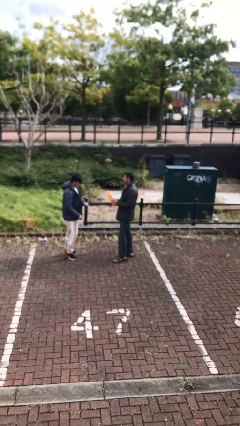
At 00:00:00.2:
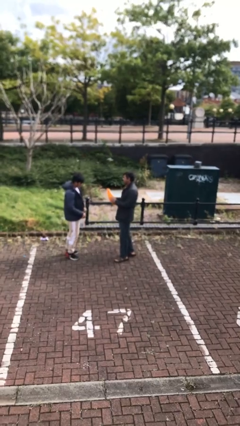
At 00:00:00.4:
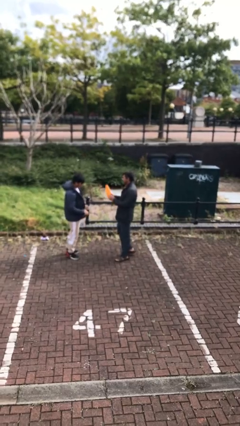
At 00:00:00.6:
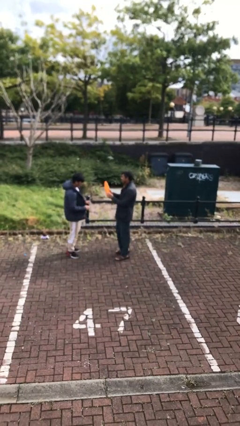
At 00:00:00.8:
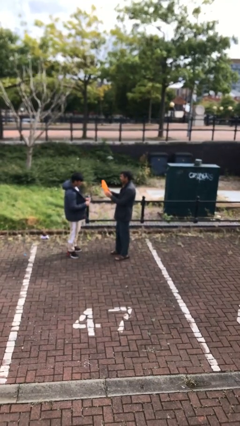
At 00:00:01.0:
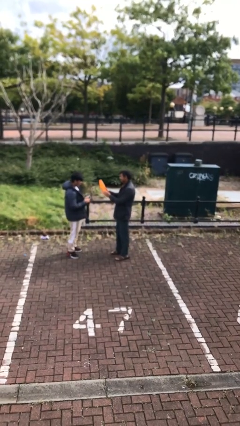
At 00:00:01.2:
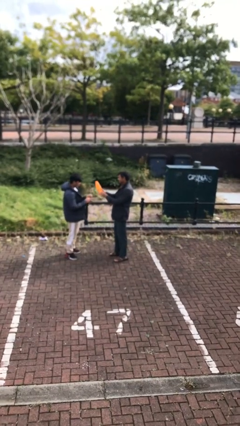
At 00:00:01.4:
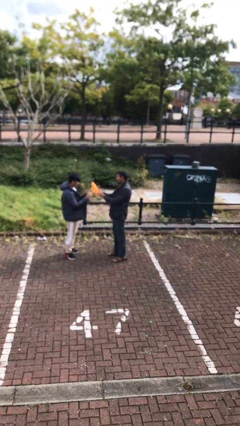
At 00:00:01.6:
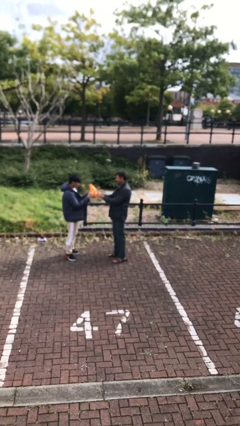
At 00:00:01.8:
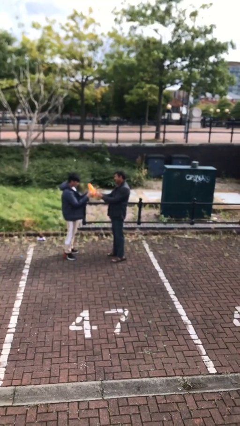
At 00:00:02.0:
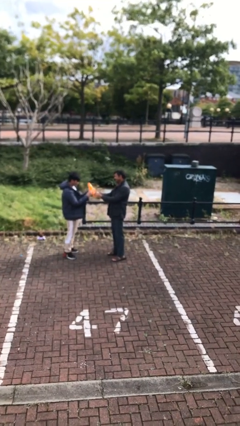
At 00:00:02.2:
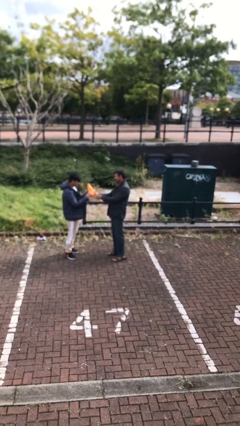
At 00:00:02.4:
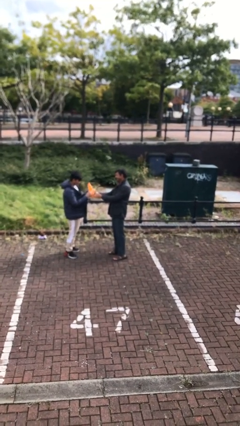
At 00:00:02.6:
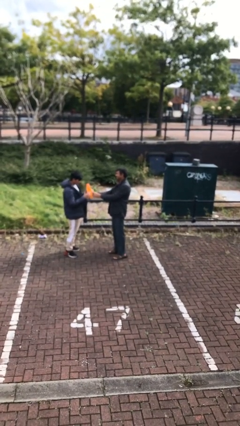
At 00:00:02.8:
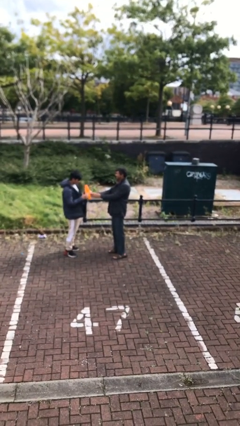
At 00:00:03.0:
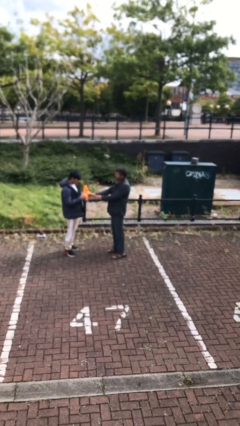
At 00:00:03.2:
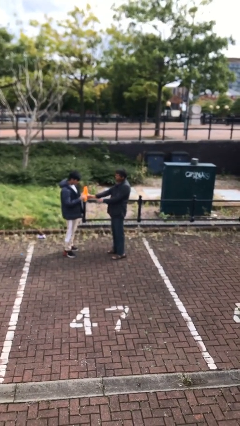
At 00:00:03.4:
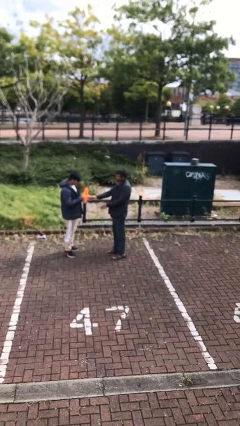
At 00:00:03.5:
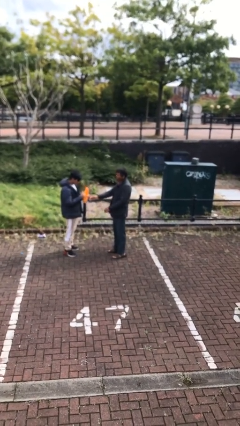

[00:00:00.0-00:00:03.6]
person transfers object to person

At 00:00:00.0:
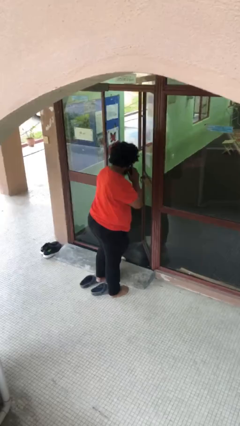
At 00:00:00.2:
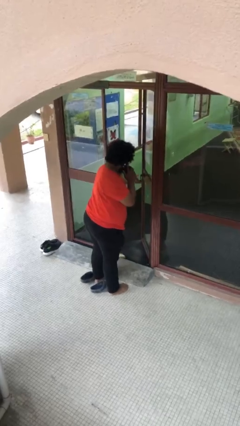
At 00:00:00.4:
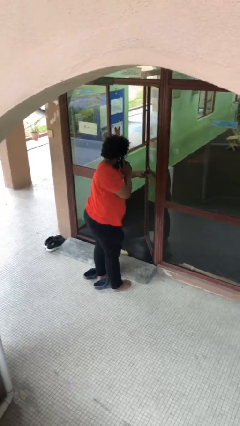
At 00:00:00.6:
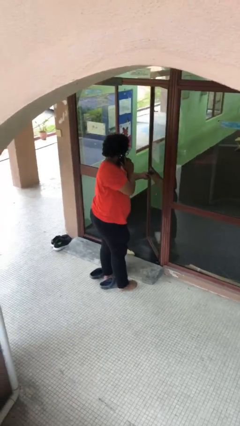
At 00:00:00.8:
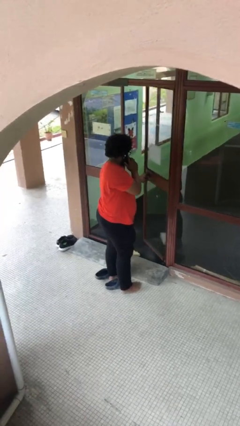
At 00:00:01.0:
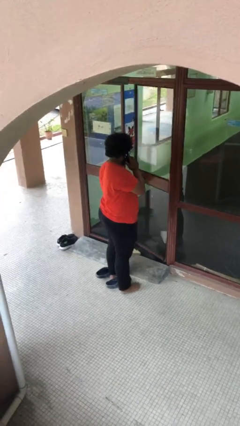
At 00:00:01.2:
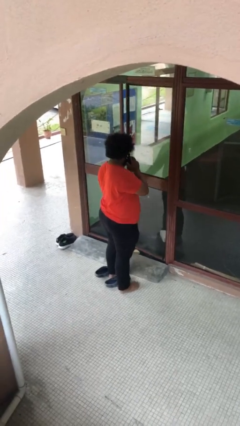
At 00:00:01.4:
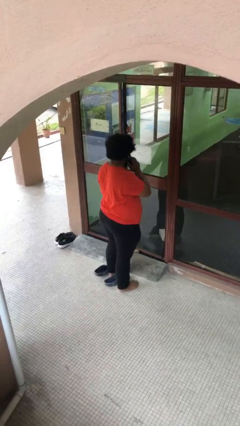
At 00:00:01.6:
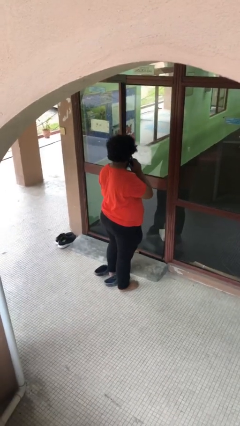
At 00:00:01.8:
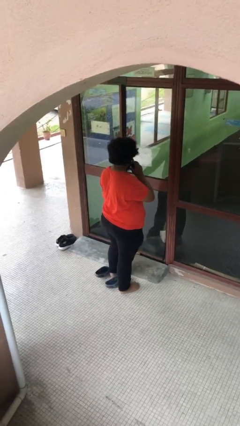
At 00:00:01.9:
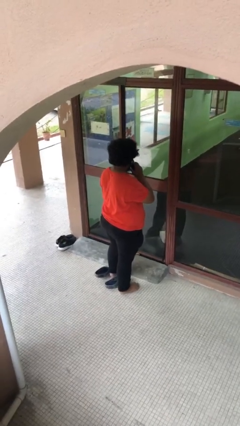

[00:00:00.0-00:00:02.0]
person closes facility door

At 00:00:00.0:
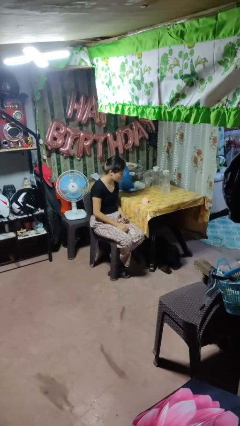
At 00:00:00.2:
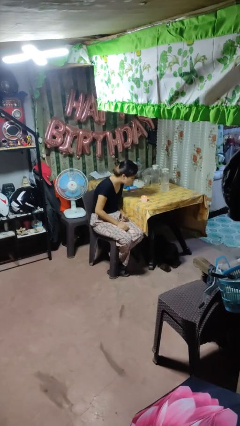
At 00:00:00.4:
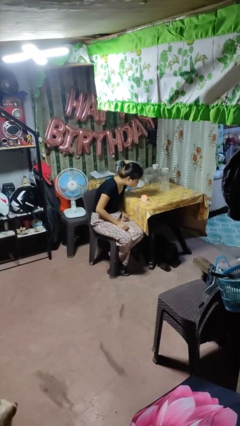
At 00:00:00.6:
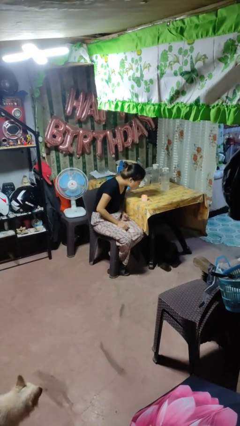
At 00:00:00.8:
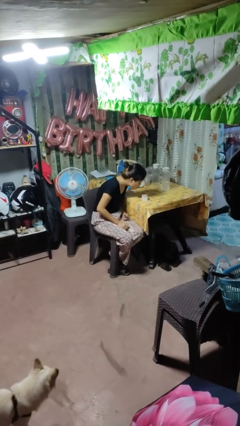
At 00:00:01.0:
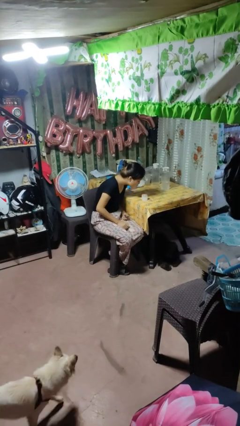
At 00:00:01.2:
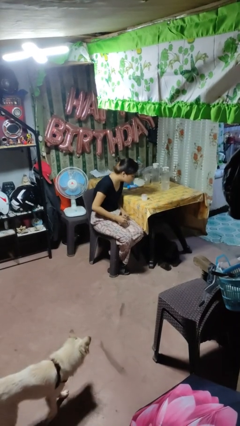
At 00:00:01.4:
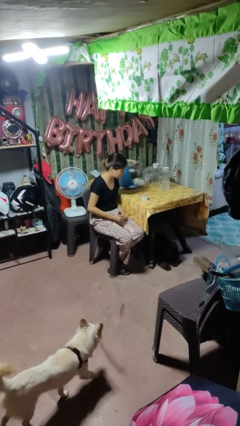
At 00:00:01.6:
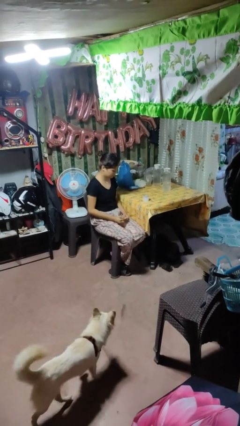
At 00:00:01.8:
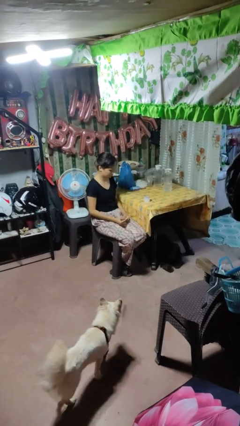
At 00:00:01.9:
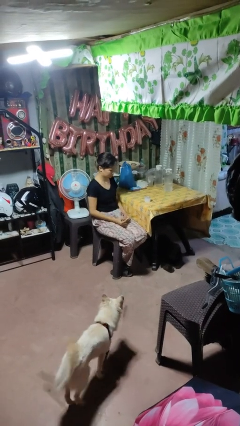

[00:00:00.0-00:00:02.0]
person extinguishes candle

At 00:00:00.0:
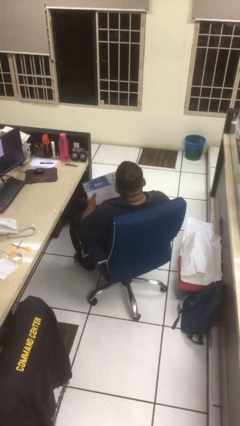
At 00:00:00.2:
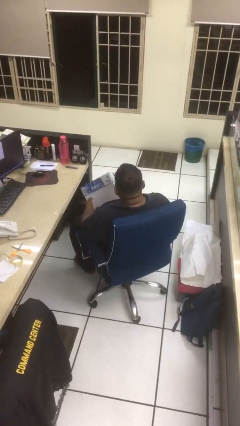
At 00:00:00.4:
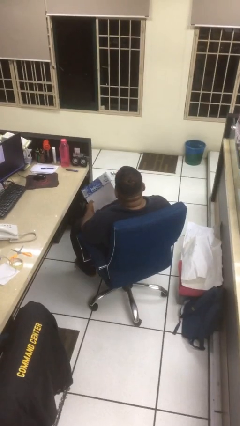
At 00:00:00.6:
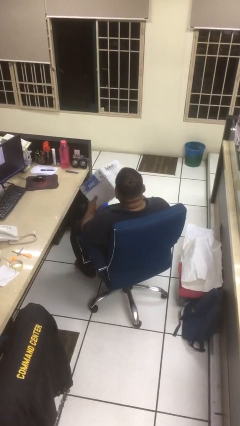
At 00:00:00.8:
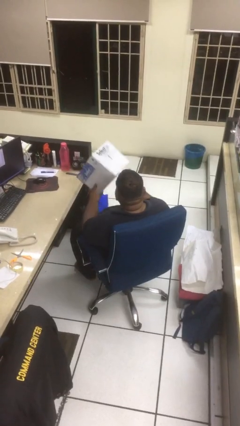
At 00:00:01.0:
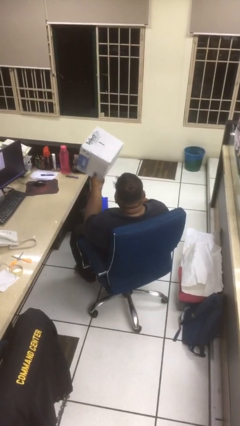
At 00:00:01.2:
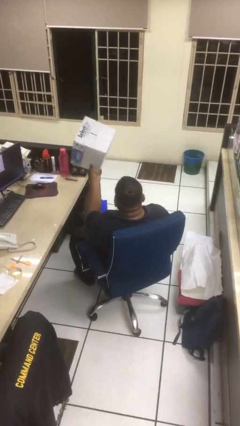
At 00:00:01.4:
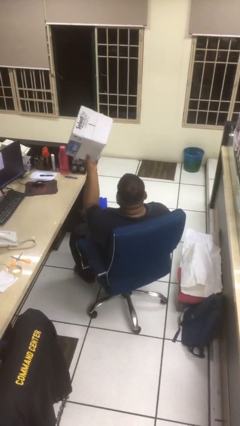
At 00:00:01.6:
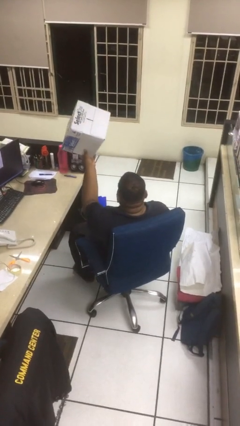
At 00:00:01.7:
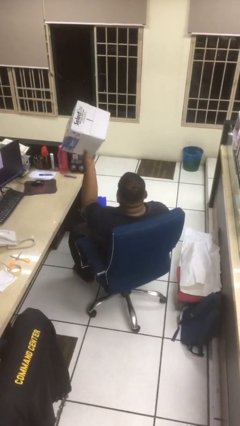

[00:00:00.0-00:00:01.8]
person holds object above head

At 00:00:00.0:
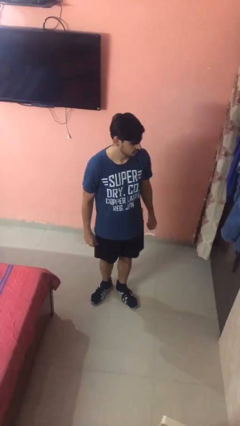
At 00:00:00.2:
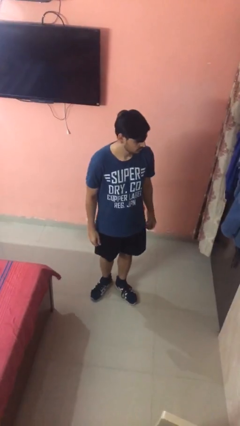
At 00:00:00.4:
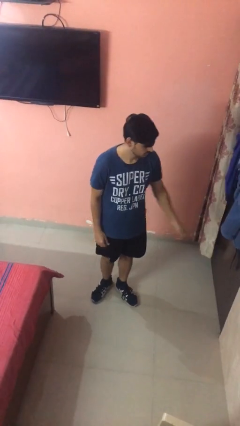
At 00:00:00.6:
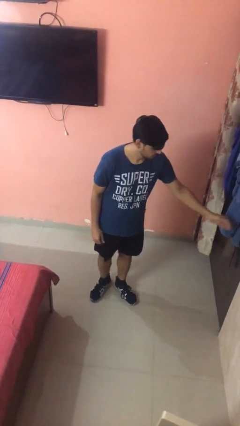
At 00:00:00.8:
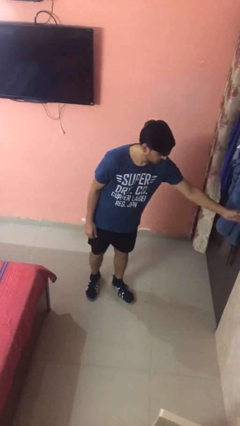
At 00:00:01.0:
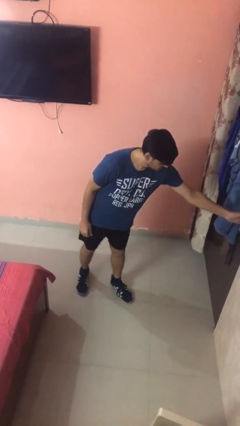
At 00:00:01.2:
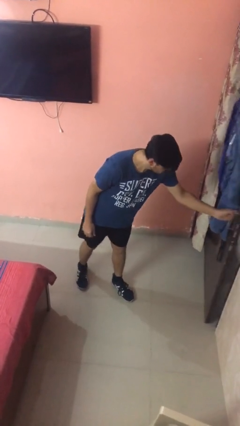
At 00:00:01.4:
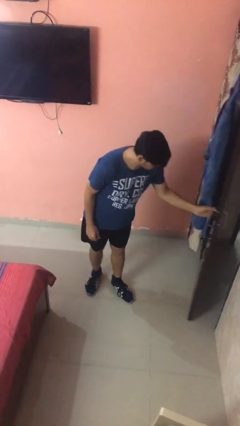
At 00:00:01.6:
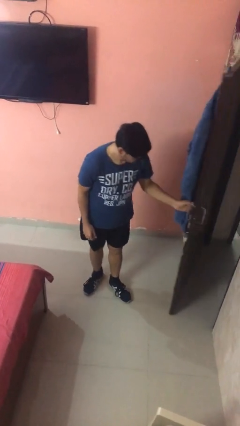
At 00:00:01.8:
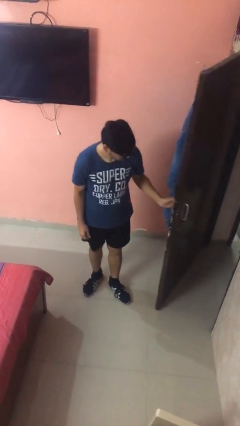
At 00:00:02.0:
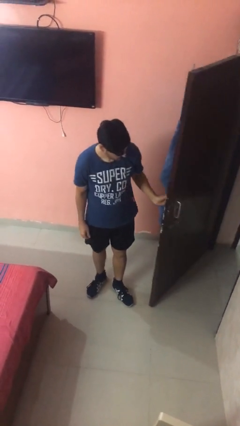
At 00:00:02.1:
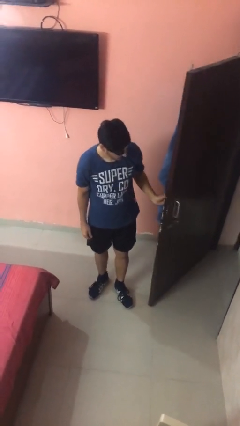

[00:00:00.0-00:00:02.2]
person opens facility door

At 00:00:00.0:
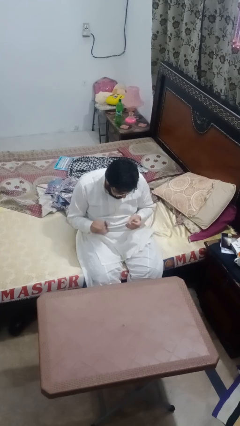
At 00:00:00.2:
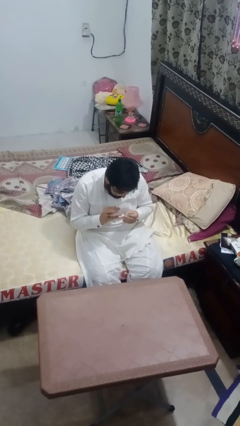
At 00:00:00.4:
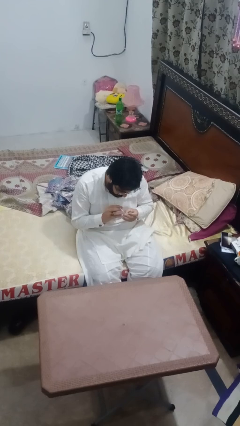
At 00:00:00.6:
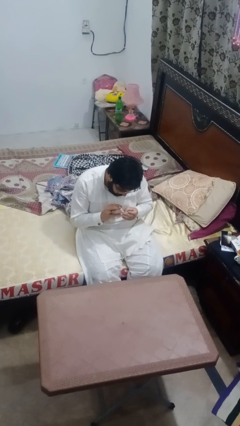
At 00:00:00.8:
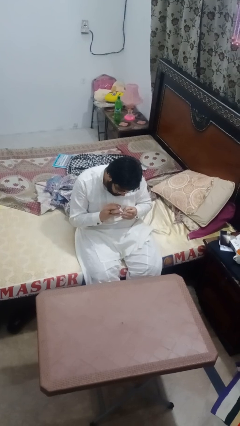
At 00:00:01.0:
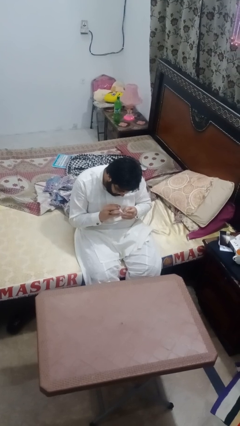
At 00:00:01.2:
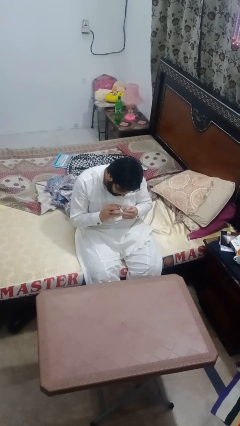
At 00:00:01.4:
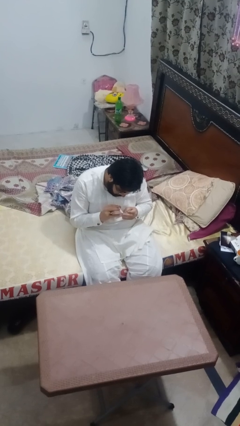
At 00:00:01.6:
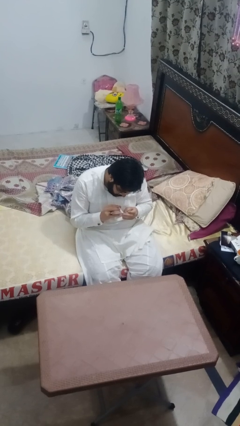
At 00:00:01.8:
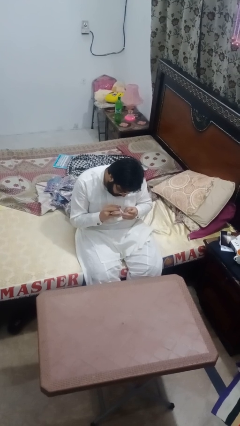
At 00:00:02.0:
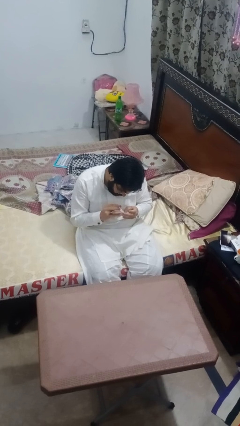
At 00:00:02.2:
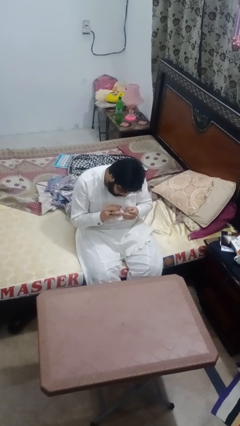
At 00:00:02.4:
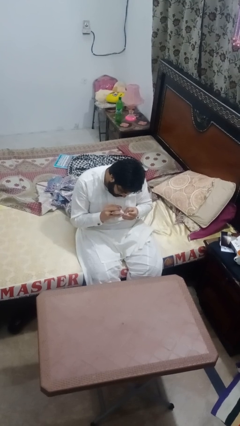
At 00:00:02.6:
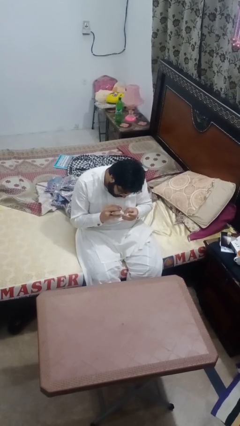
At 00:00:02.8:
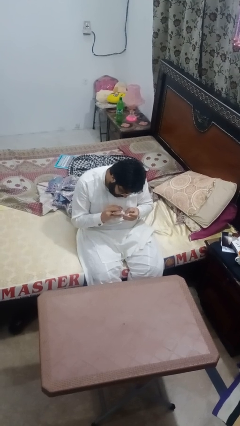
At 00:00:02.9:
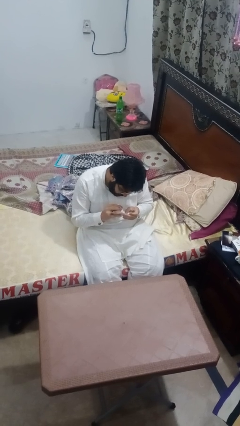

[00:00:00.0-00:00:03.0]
person clips fingernails

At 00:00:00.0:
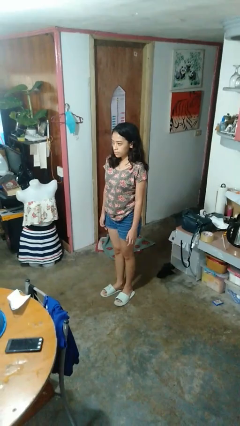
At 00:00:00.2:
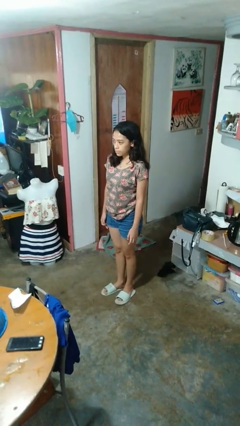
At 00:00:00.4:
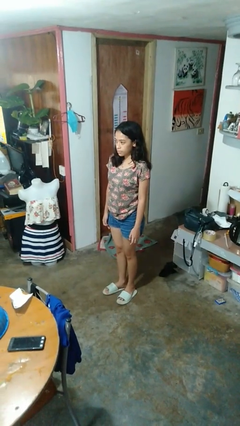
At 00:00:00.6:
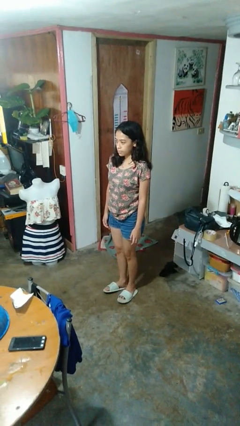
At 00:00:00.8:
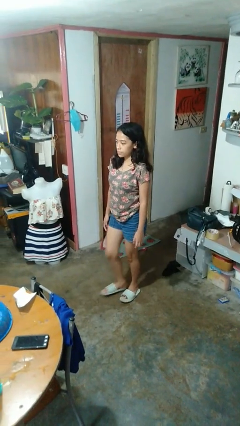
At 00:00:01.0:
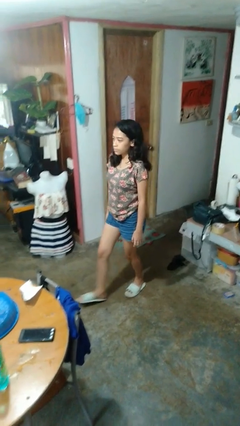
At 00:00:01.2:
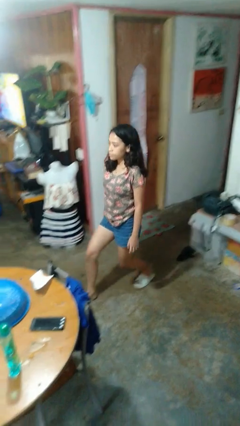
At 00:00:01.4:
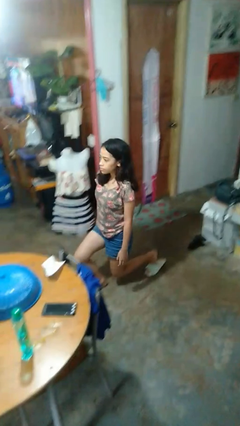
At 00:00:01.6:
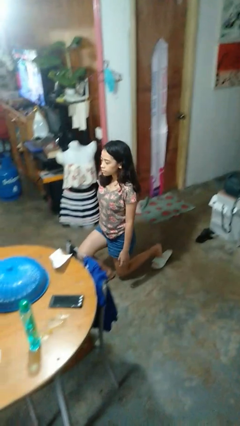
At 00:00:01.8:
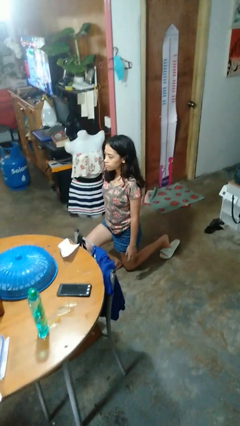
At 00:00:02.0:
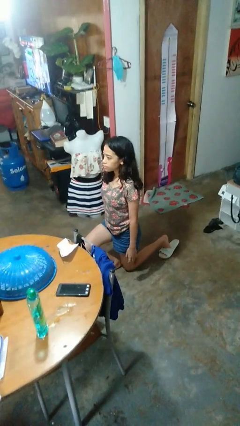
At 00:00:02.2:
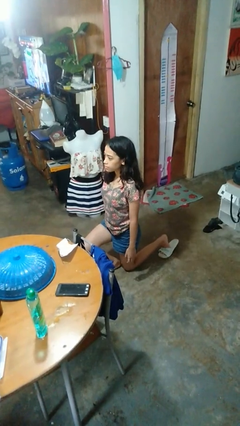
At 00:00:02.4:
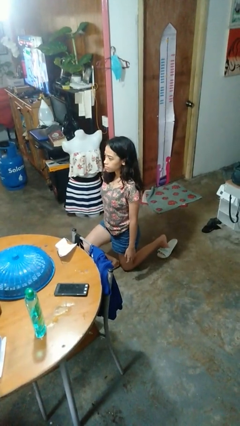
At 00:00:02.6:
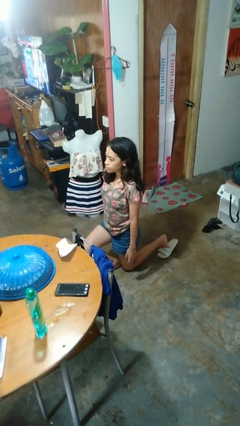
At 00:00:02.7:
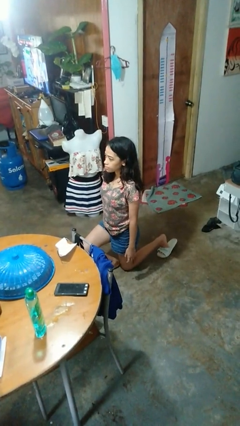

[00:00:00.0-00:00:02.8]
person kneels
